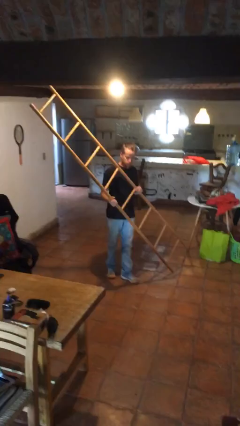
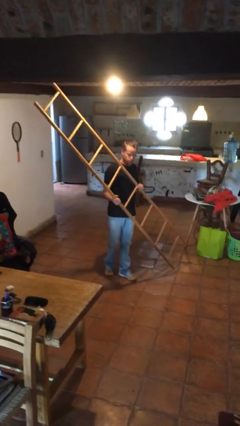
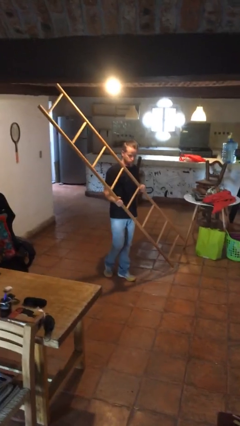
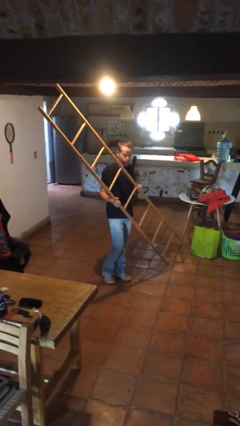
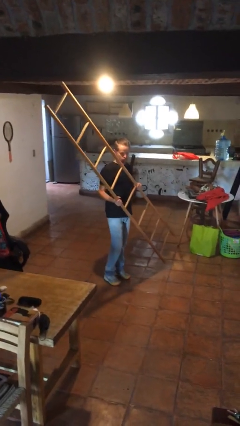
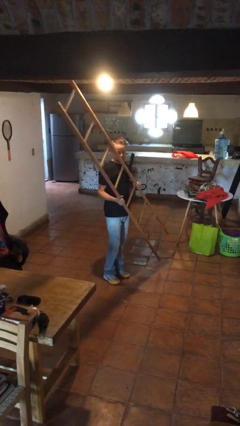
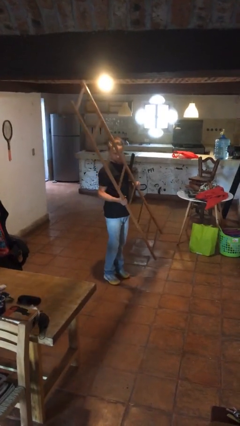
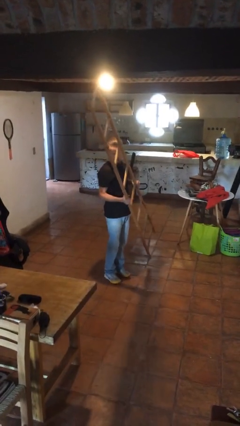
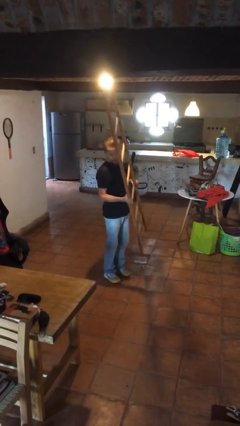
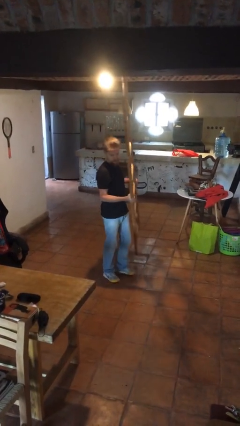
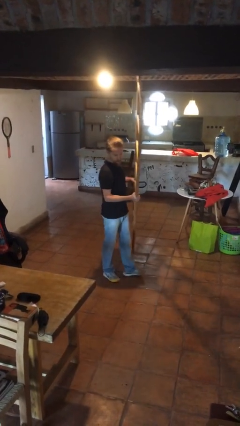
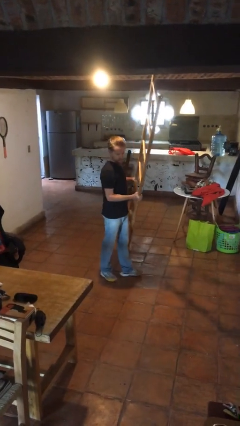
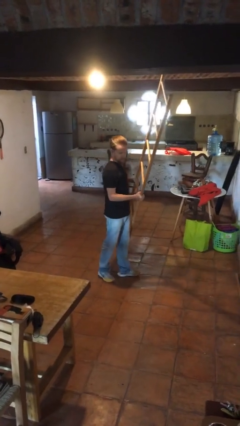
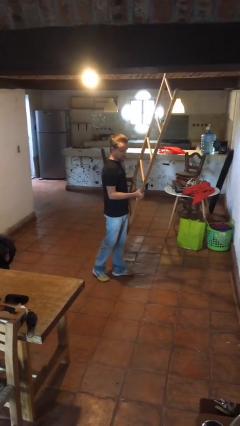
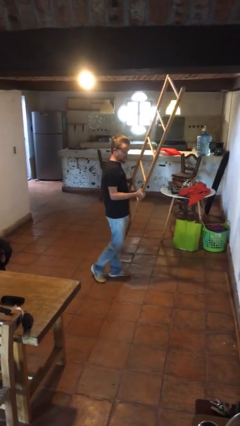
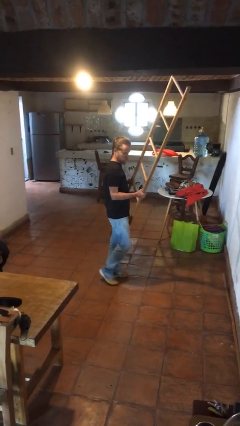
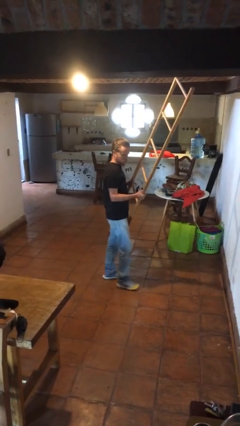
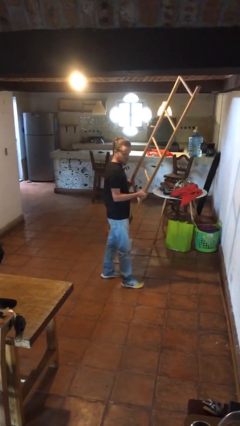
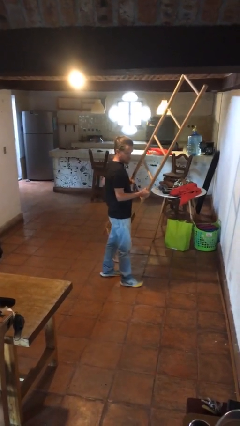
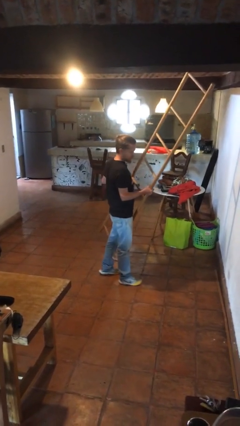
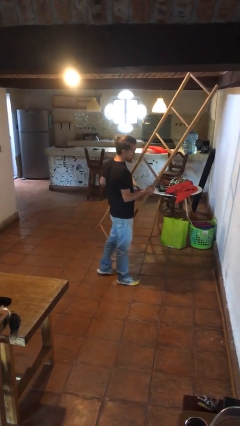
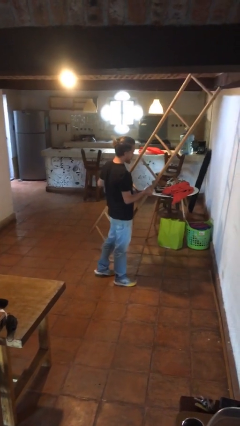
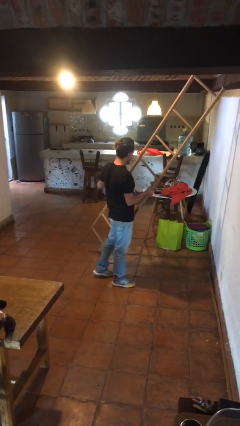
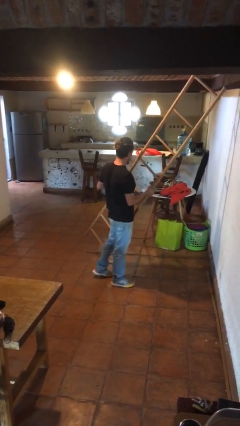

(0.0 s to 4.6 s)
person carries furniture

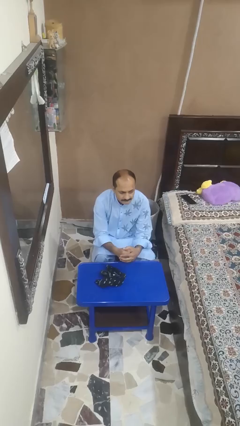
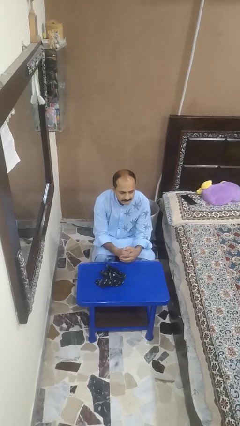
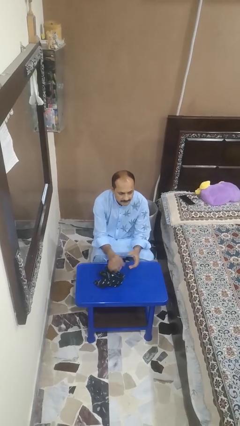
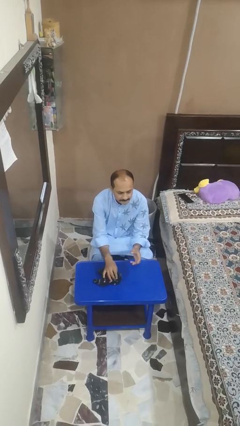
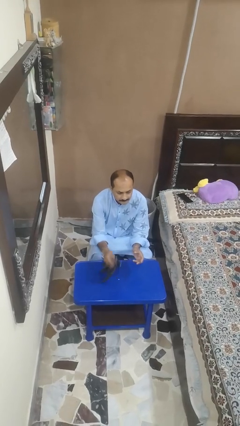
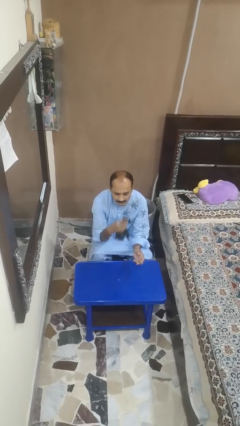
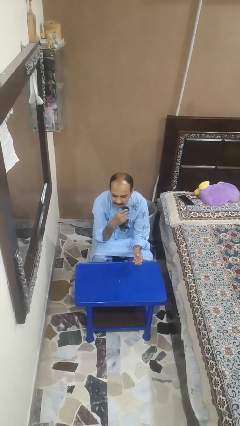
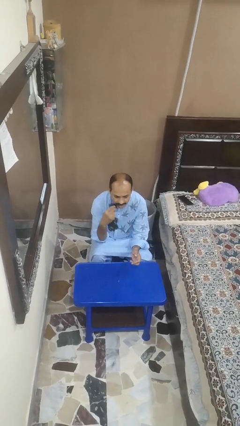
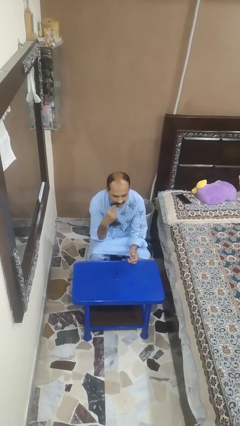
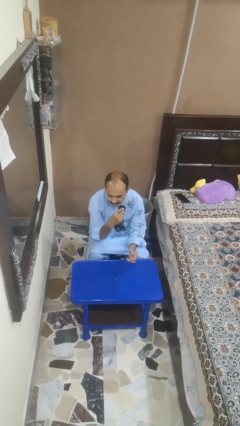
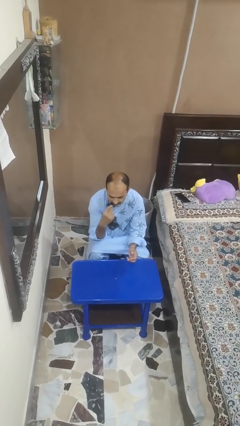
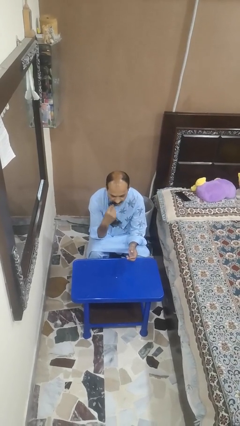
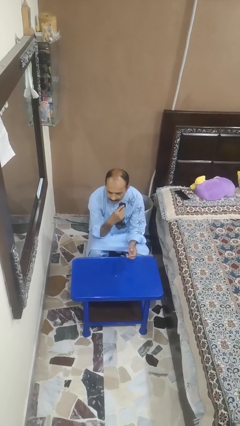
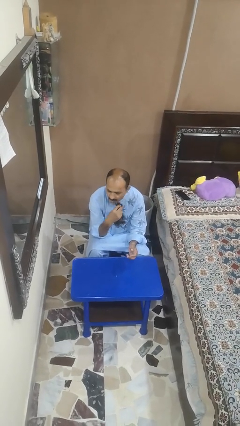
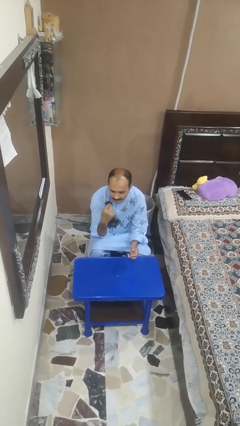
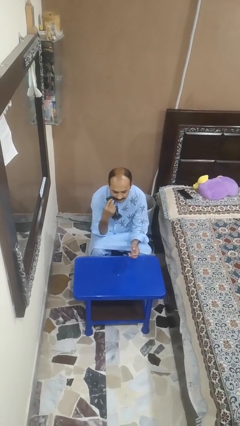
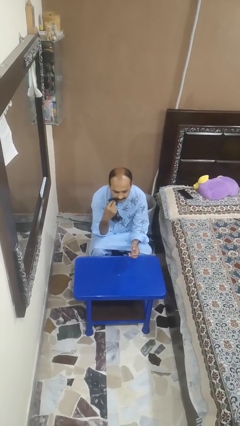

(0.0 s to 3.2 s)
person wipes mouth with napkin

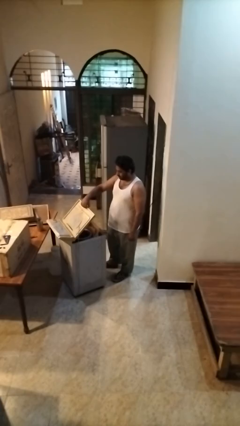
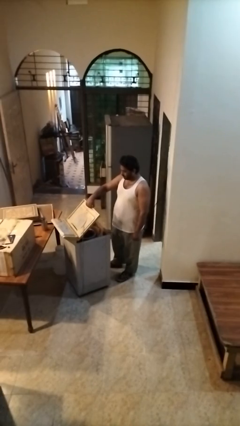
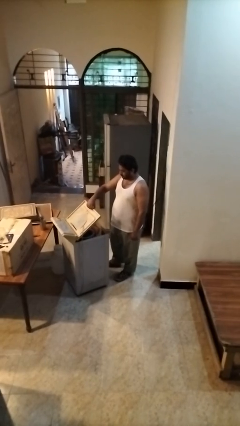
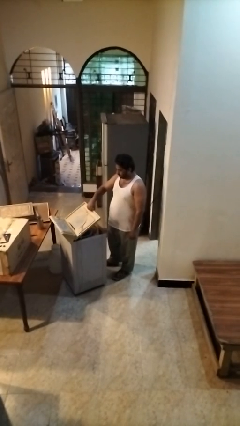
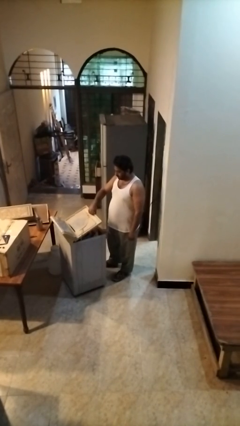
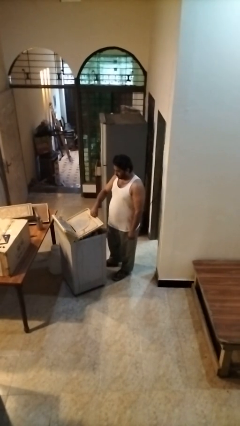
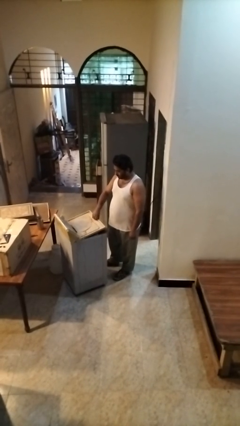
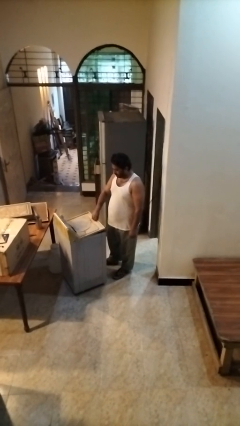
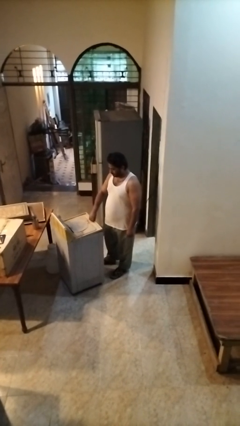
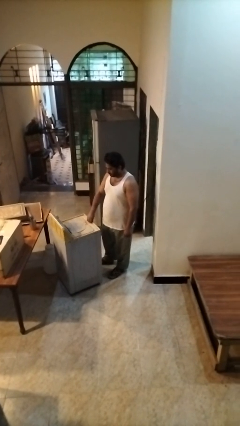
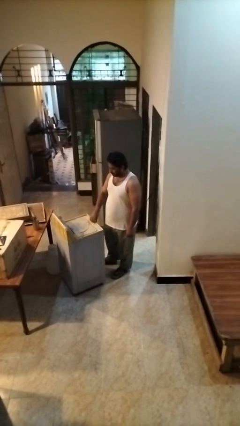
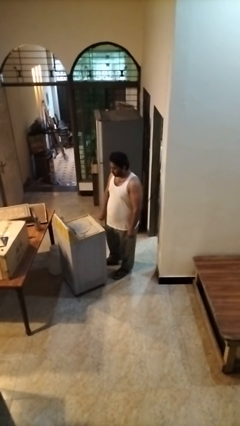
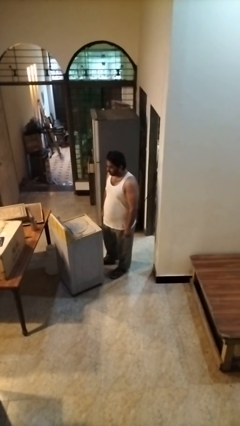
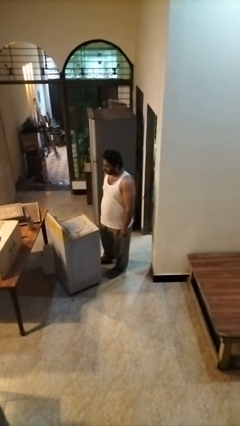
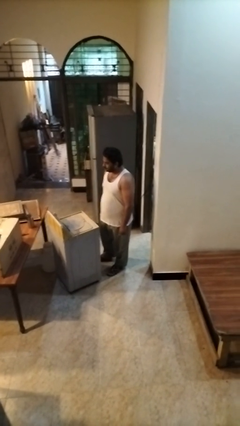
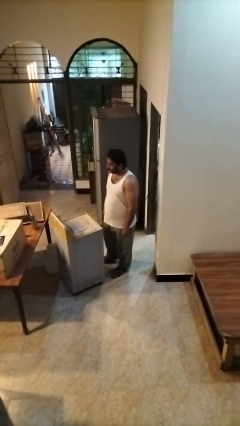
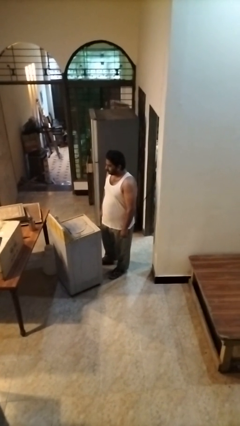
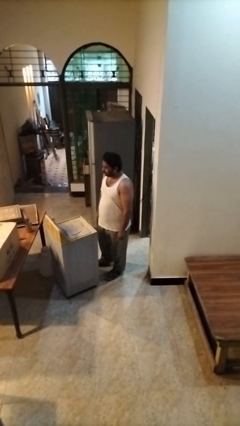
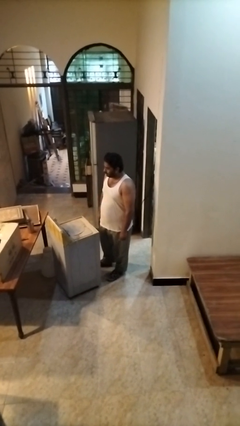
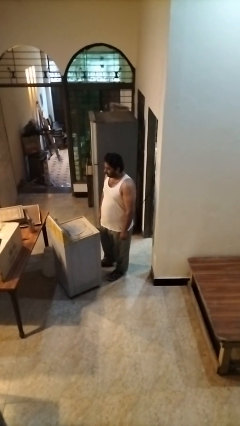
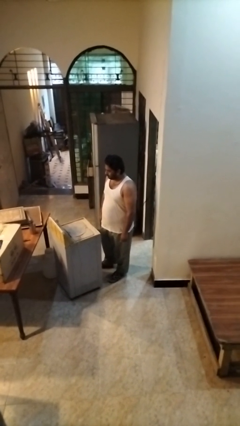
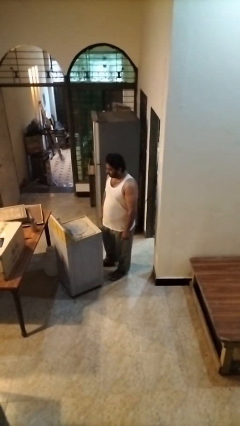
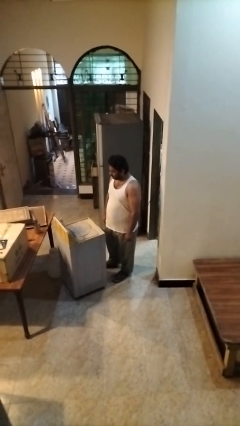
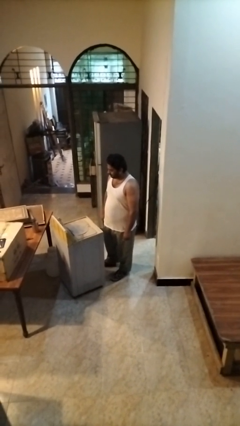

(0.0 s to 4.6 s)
person closes clothes washer

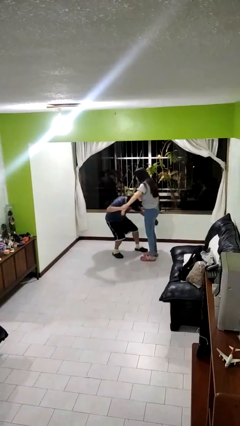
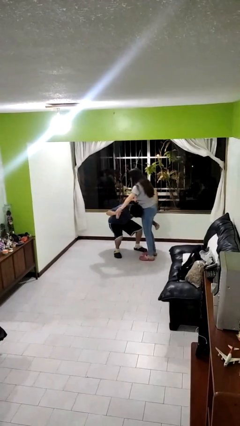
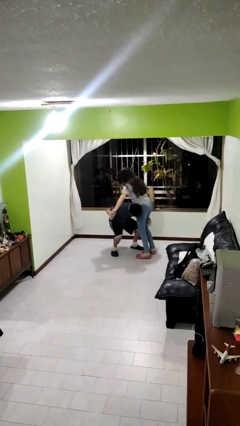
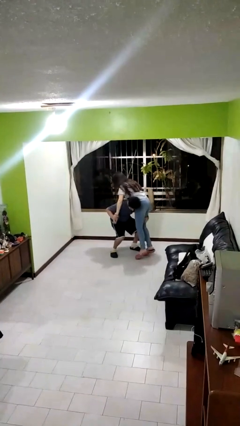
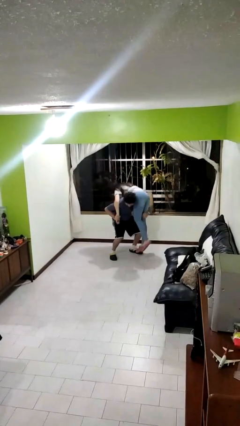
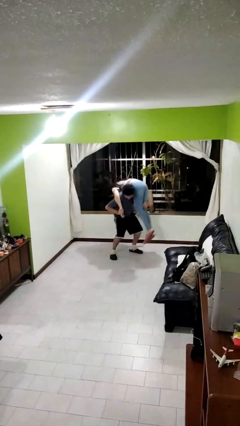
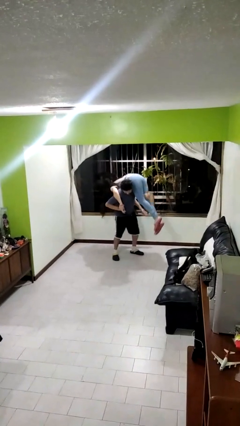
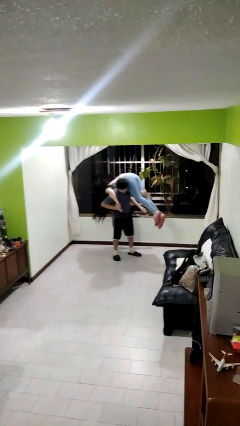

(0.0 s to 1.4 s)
person carries person over shoulder

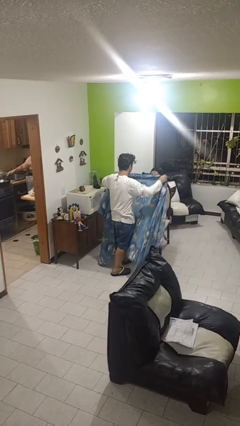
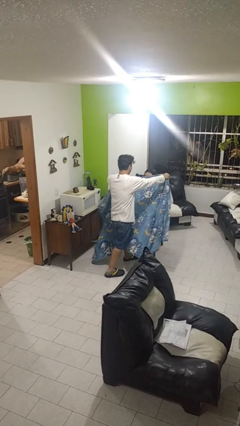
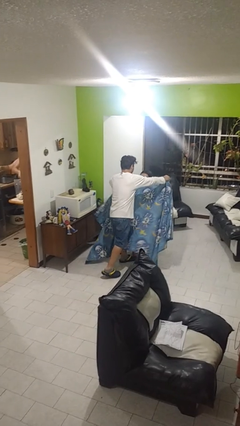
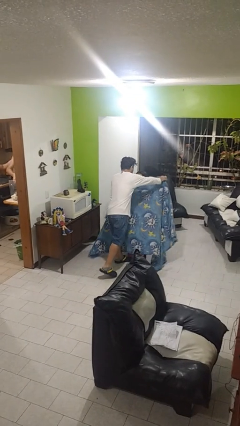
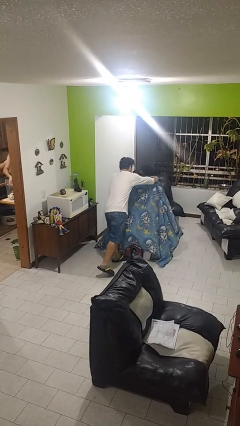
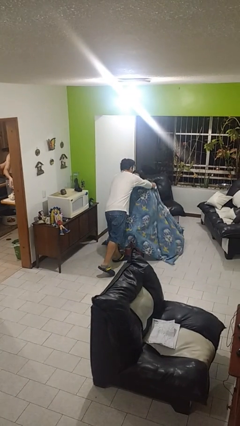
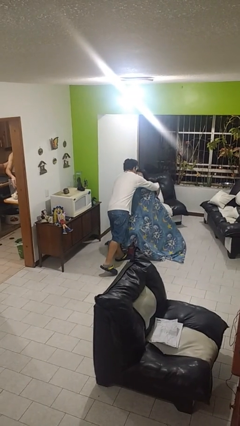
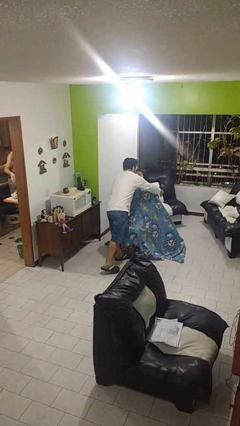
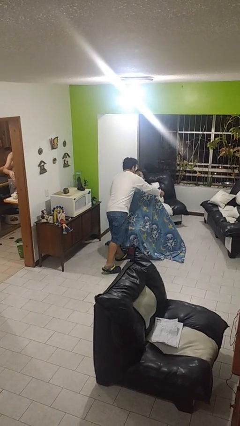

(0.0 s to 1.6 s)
person covers friend with blanket

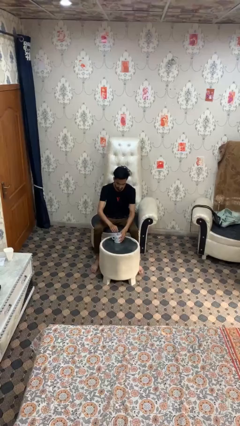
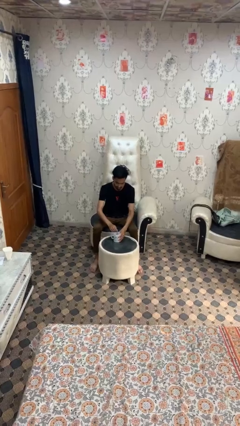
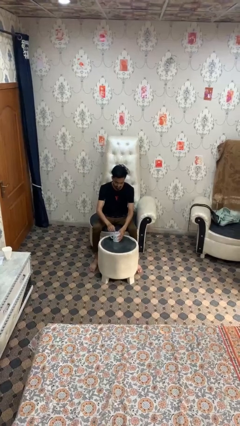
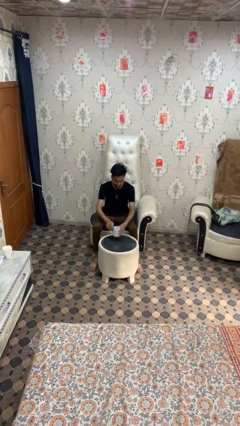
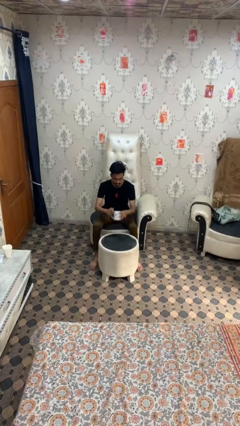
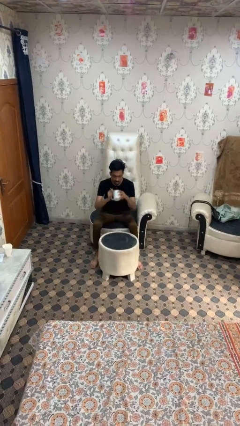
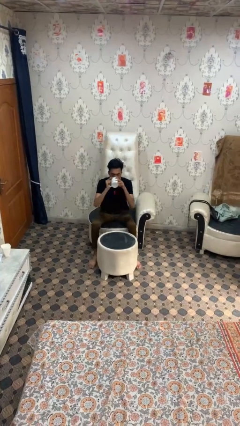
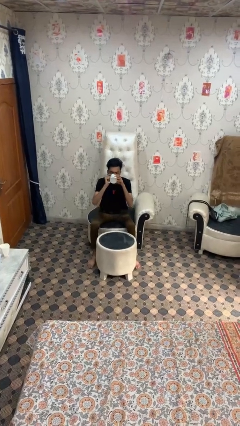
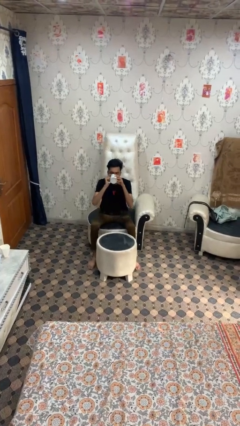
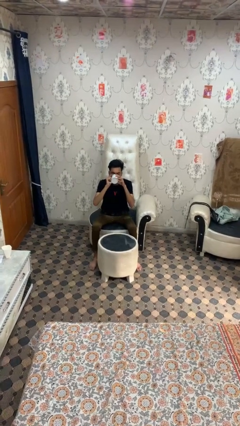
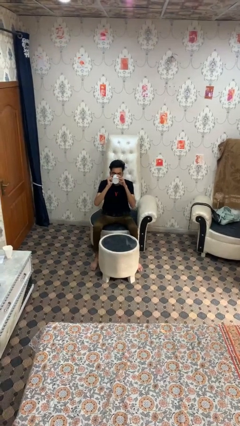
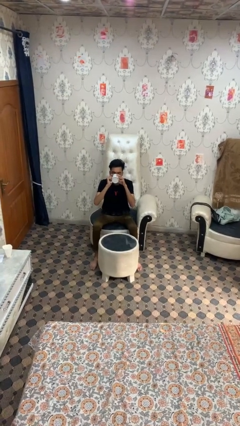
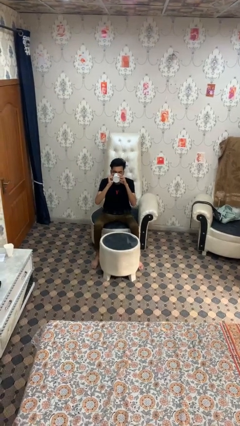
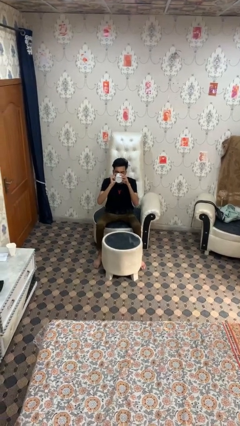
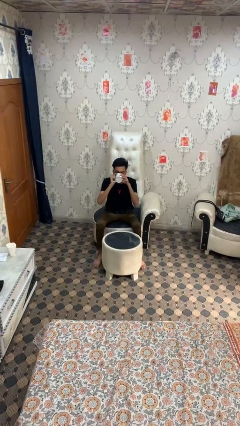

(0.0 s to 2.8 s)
person drinks from mug
